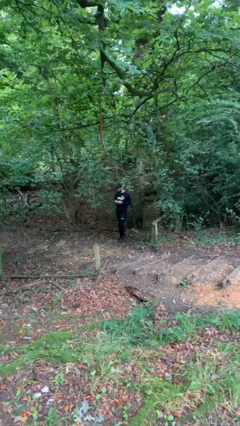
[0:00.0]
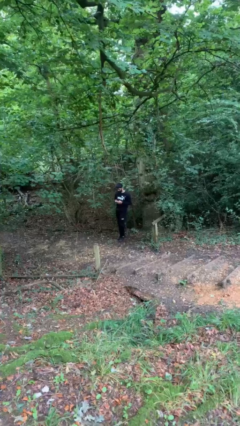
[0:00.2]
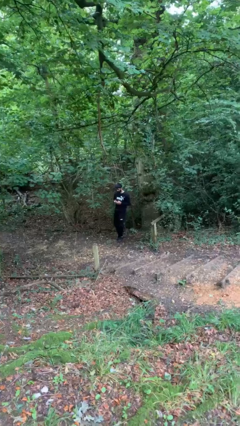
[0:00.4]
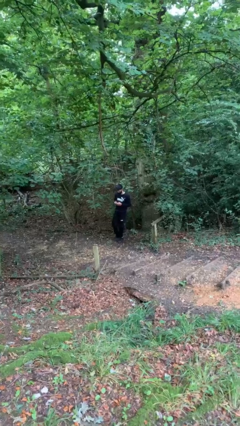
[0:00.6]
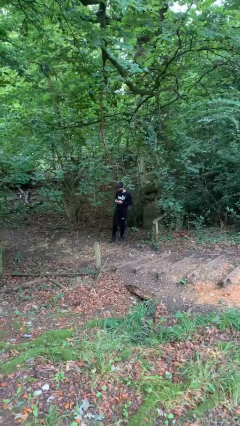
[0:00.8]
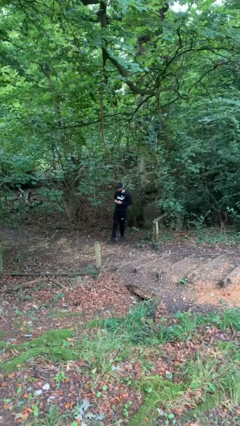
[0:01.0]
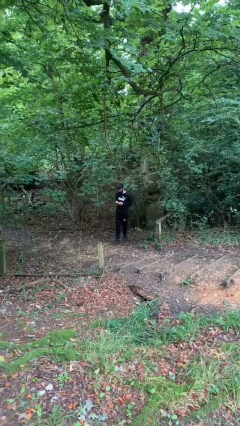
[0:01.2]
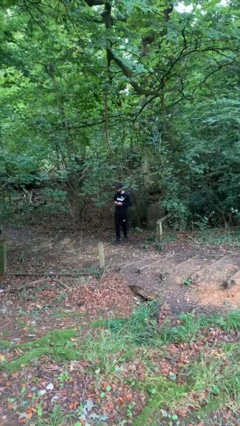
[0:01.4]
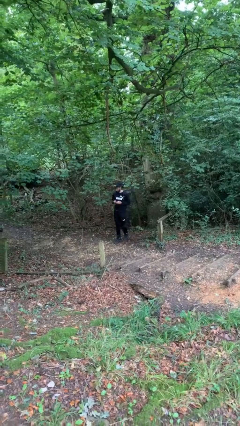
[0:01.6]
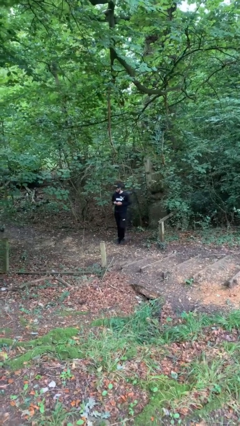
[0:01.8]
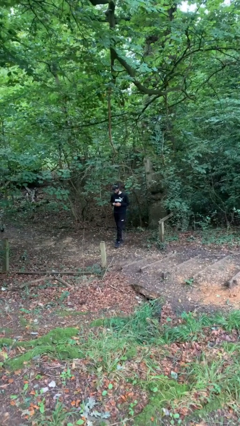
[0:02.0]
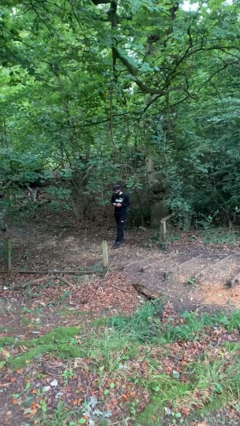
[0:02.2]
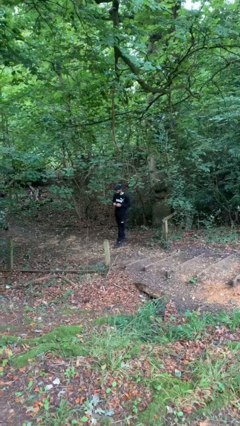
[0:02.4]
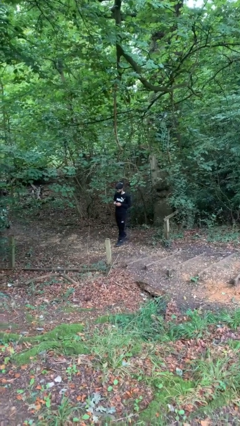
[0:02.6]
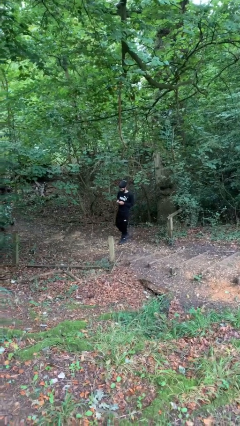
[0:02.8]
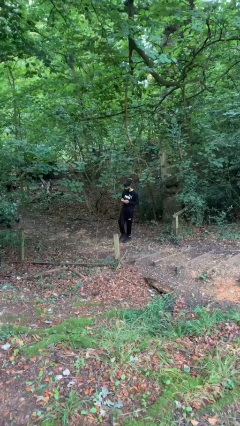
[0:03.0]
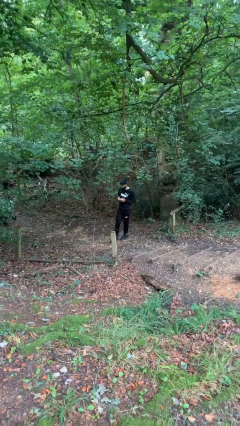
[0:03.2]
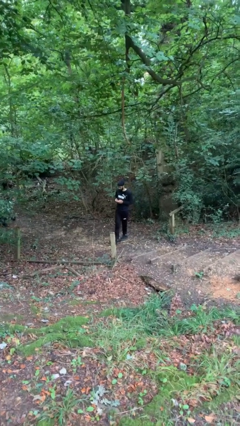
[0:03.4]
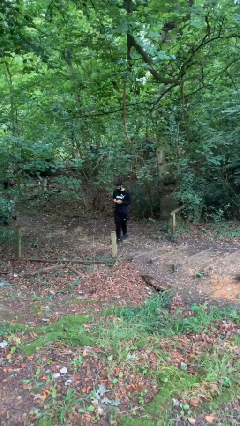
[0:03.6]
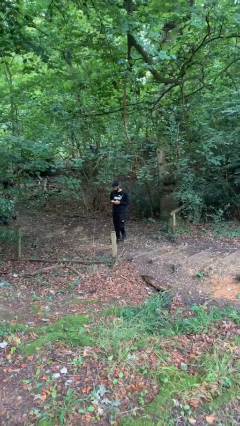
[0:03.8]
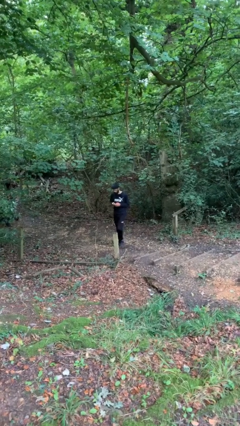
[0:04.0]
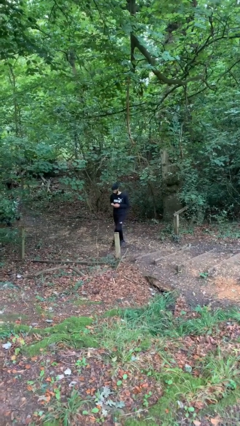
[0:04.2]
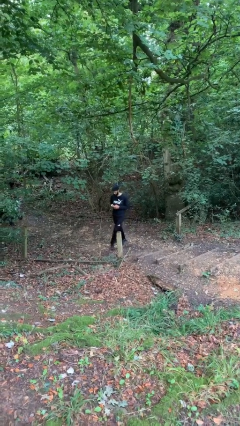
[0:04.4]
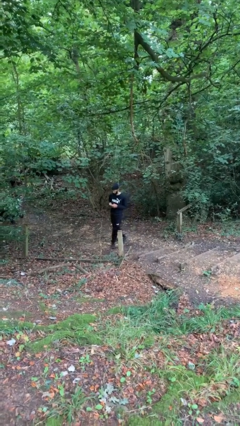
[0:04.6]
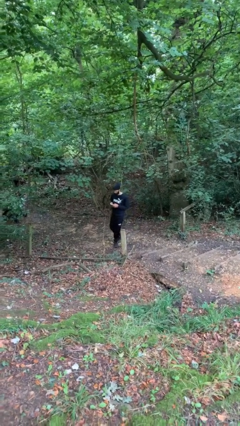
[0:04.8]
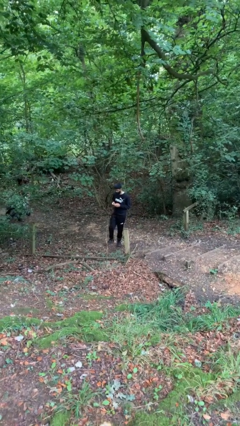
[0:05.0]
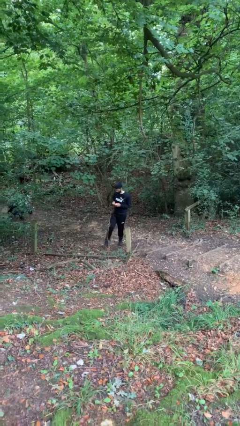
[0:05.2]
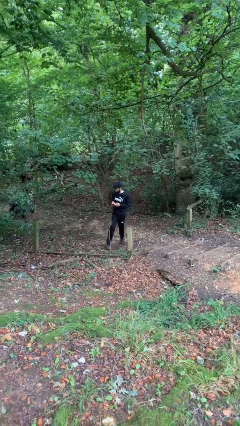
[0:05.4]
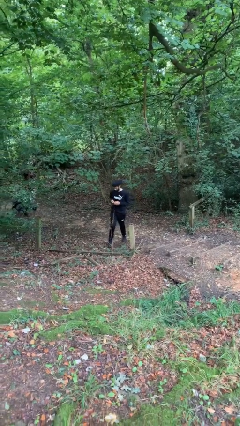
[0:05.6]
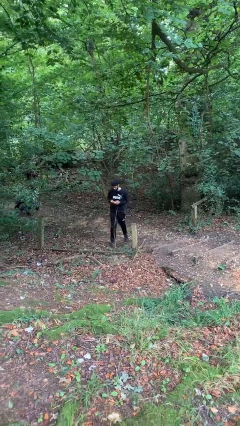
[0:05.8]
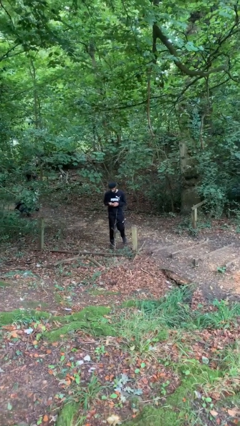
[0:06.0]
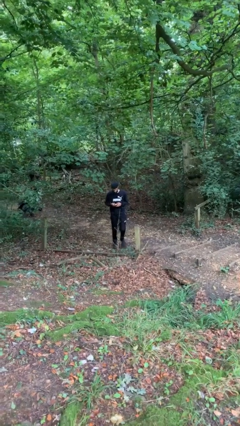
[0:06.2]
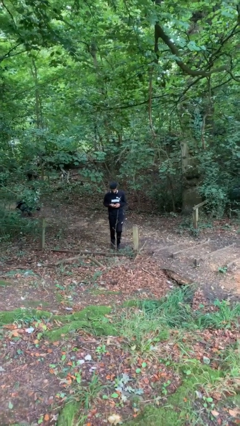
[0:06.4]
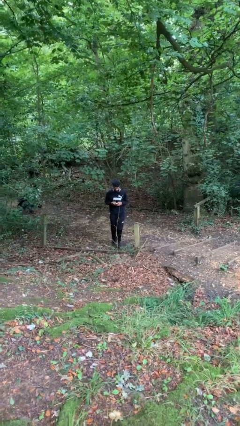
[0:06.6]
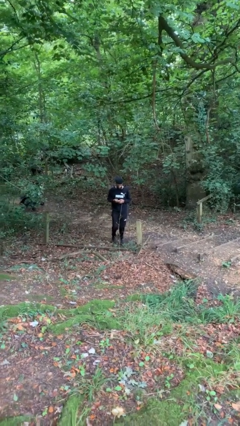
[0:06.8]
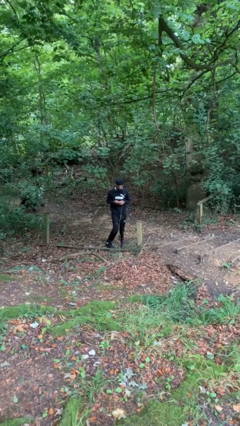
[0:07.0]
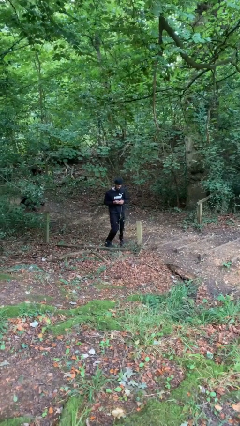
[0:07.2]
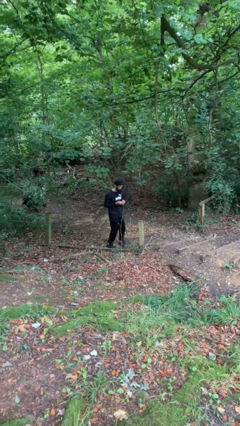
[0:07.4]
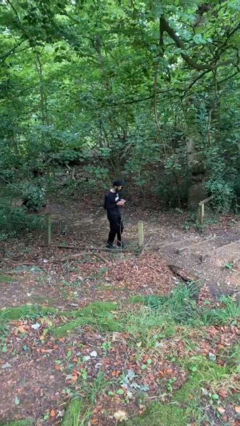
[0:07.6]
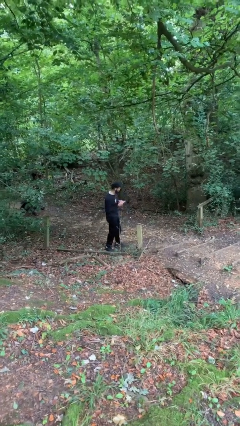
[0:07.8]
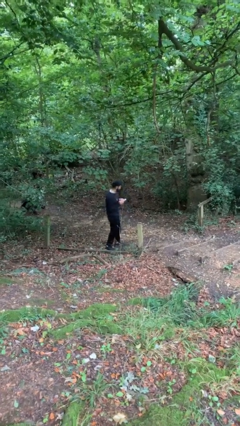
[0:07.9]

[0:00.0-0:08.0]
person texts on phone

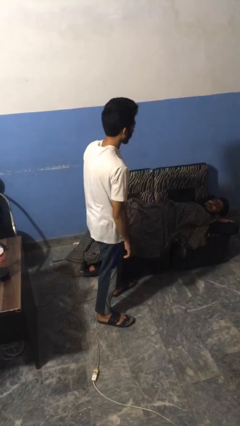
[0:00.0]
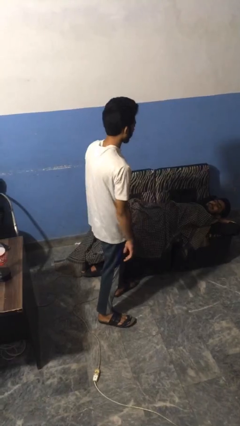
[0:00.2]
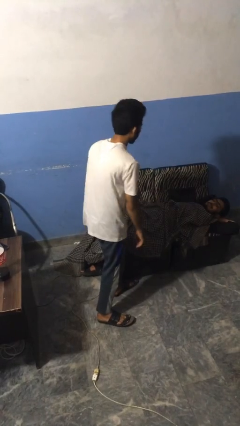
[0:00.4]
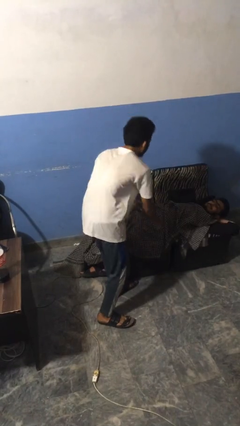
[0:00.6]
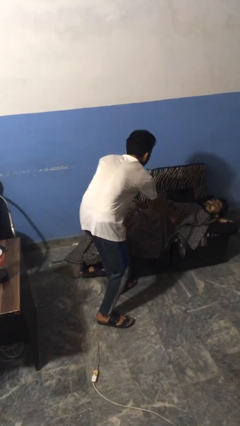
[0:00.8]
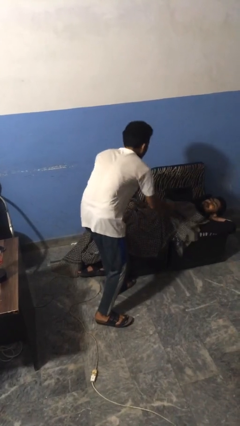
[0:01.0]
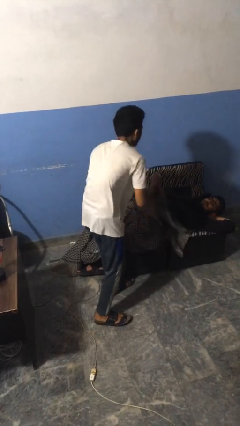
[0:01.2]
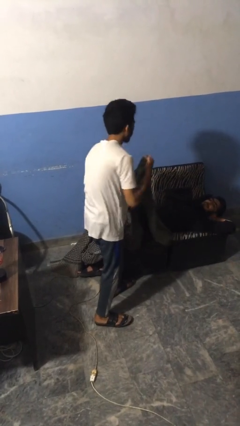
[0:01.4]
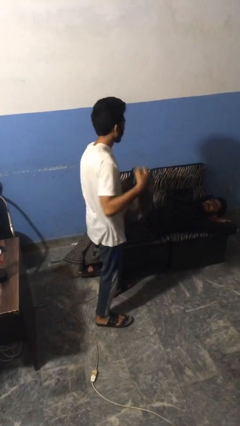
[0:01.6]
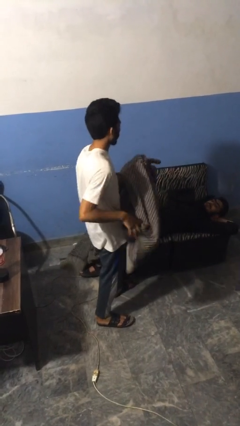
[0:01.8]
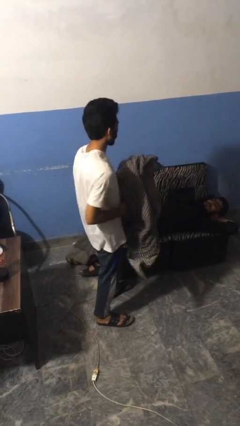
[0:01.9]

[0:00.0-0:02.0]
person uncovers friend with blanket

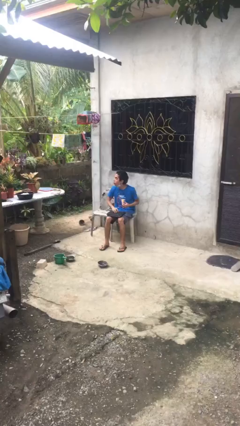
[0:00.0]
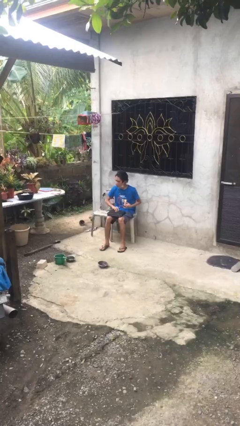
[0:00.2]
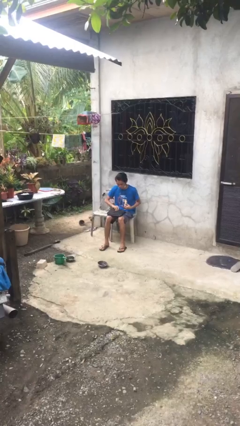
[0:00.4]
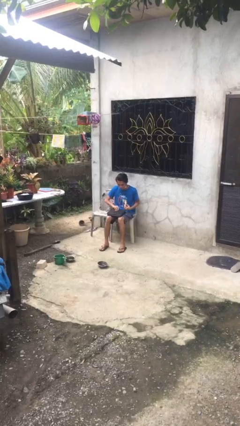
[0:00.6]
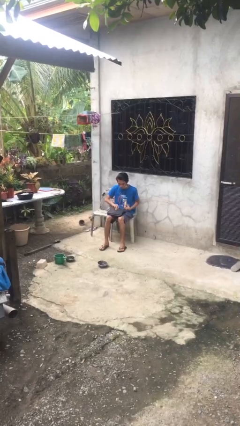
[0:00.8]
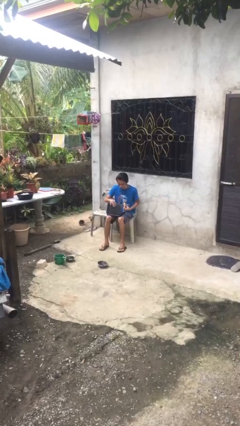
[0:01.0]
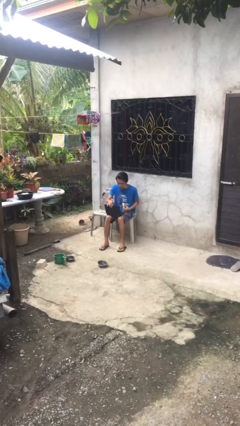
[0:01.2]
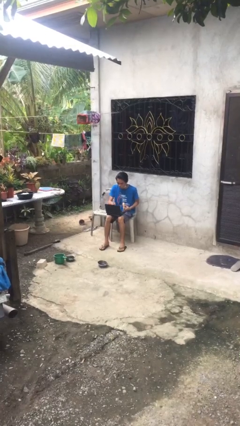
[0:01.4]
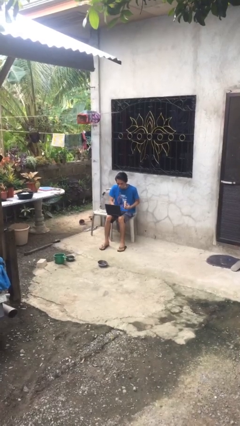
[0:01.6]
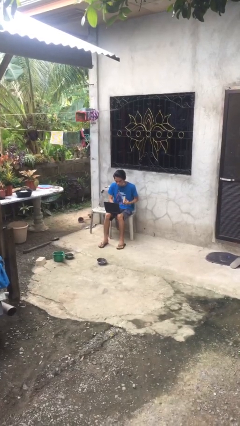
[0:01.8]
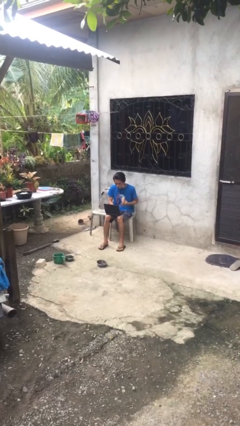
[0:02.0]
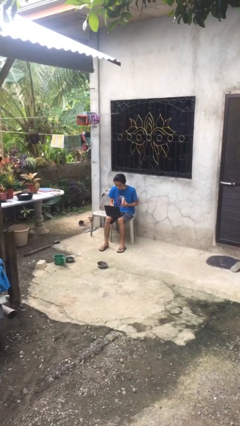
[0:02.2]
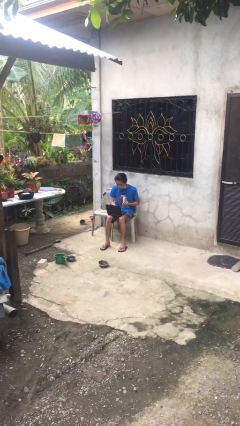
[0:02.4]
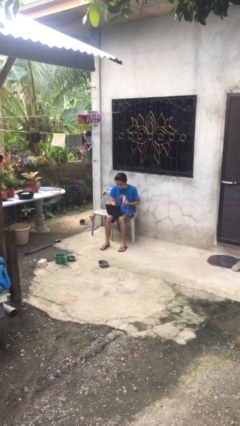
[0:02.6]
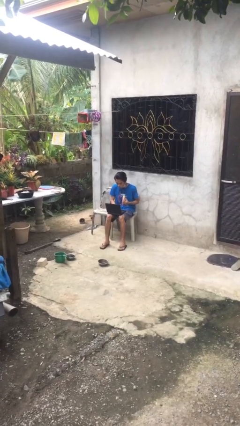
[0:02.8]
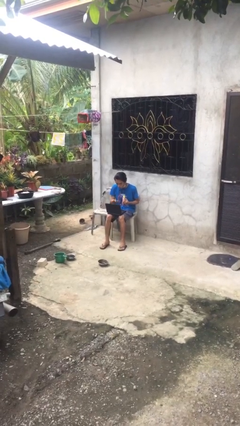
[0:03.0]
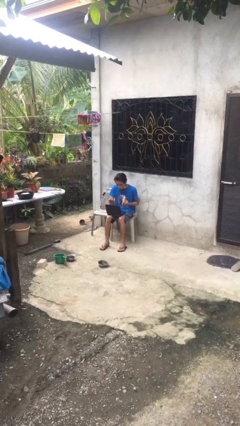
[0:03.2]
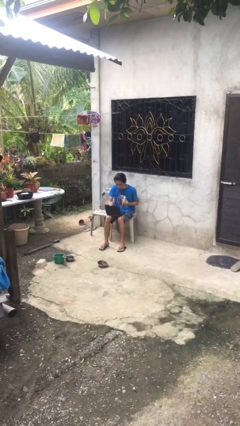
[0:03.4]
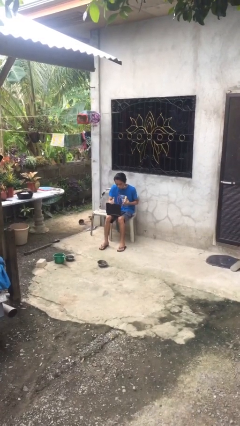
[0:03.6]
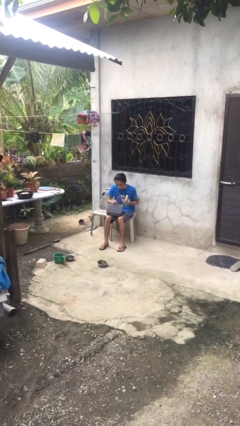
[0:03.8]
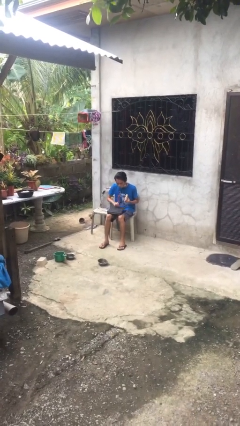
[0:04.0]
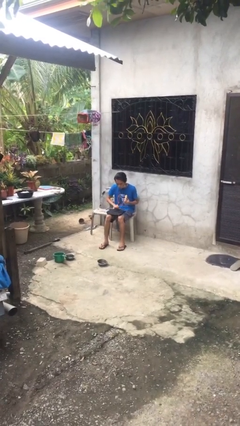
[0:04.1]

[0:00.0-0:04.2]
person interacts with laptop

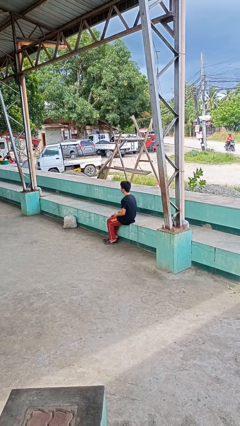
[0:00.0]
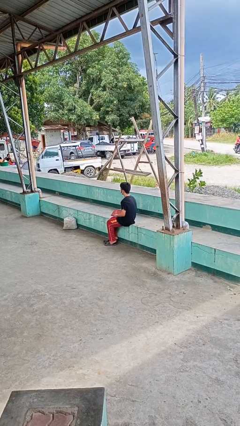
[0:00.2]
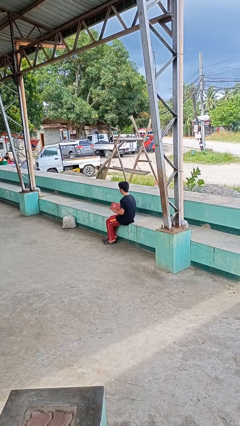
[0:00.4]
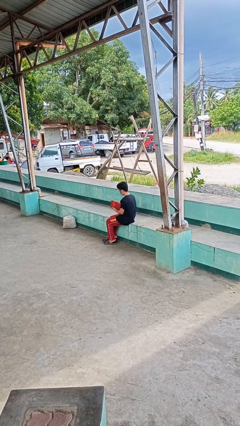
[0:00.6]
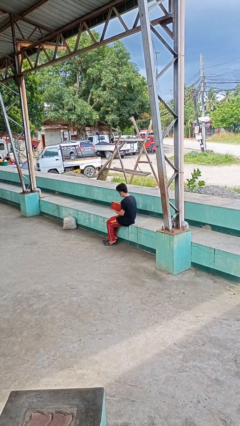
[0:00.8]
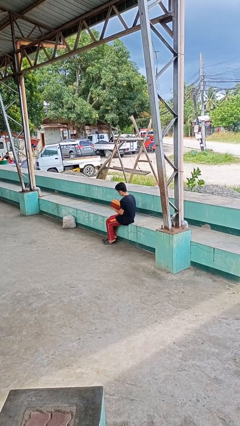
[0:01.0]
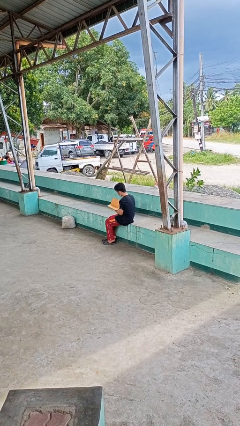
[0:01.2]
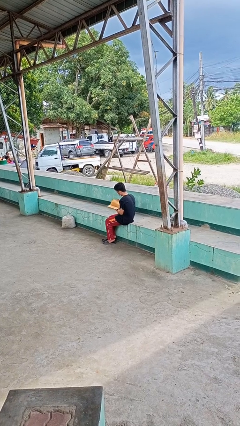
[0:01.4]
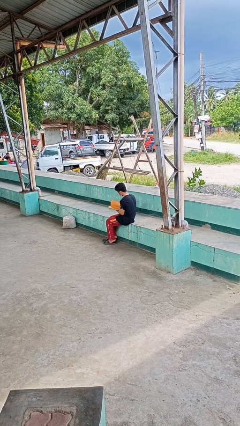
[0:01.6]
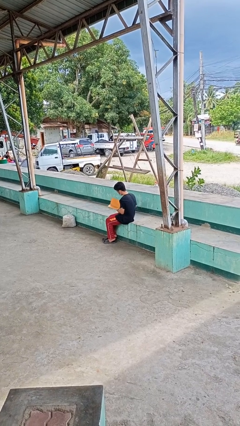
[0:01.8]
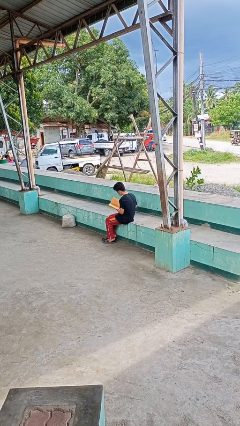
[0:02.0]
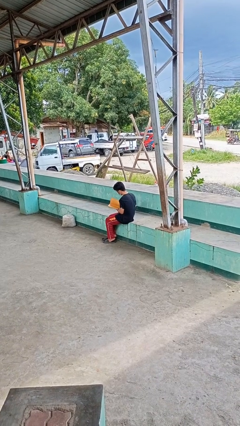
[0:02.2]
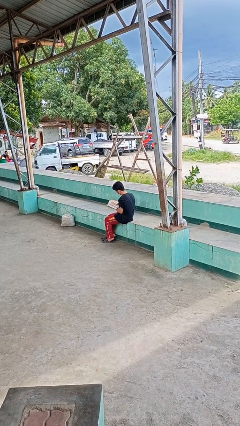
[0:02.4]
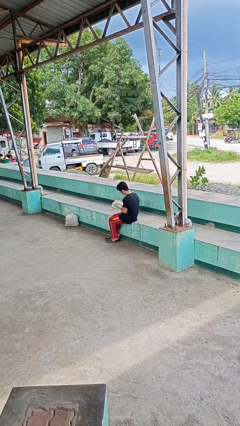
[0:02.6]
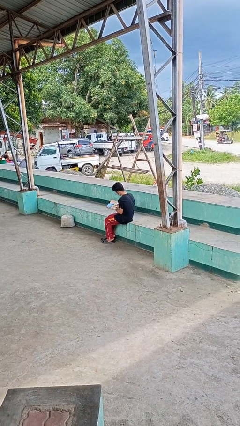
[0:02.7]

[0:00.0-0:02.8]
person reads book

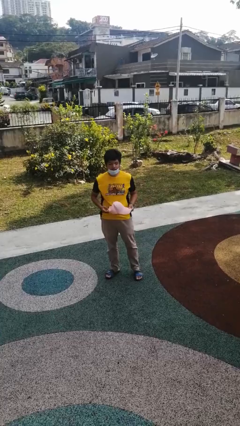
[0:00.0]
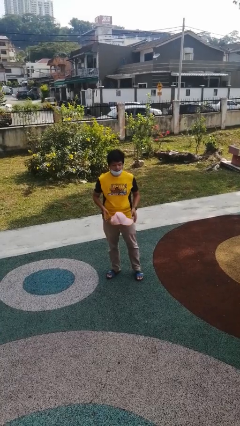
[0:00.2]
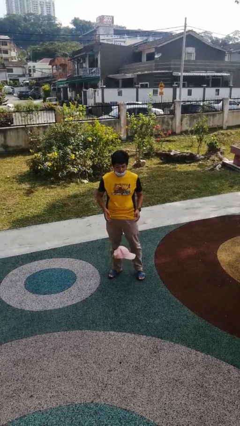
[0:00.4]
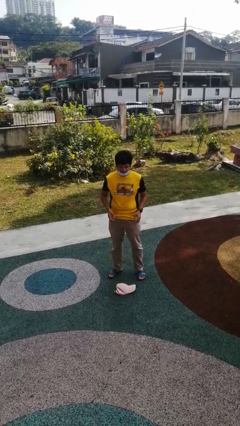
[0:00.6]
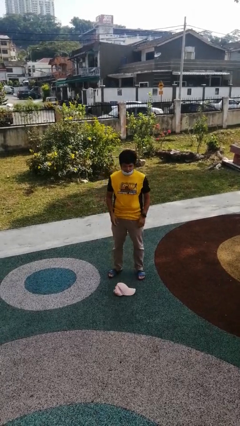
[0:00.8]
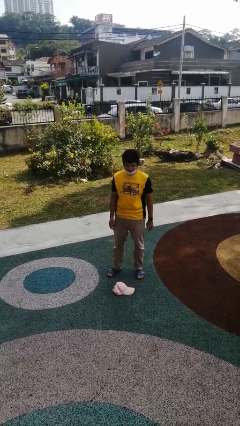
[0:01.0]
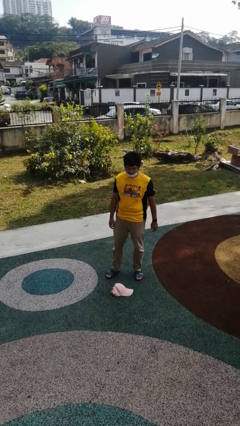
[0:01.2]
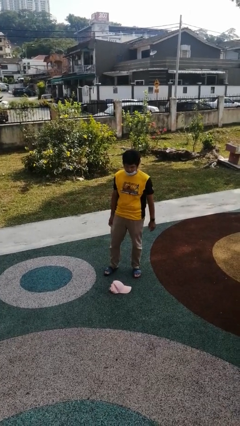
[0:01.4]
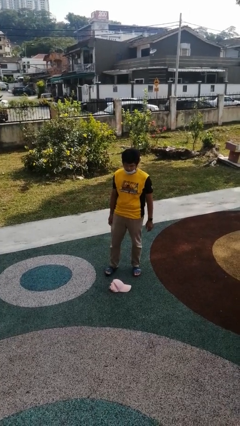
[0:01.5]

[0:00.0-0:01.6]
person drops object
